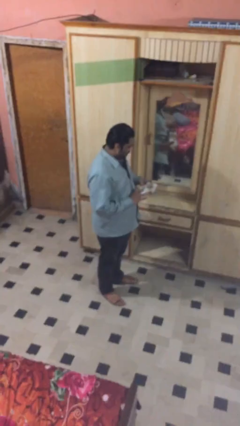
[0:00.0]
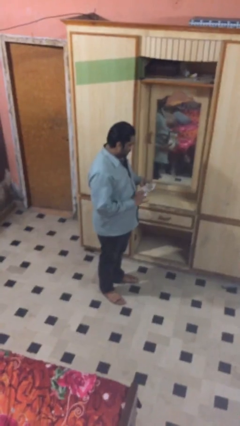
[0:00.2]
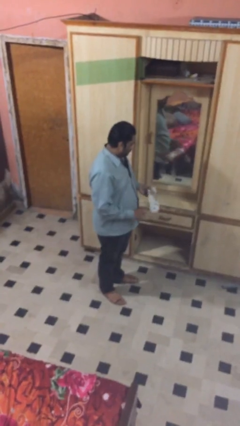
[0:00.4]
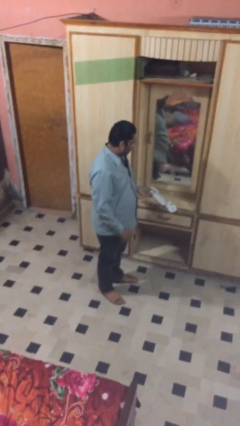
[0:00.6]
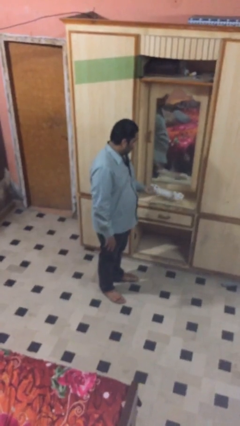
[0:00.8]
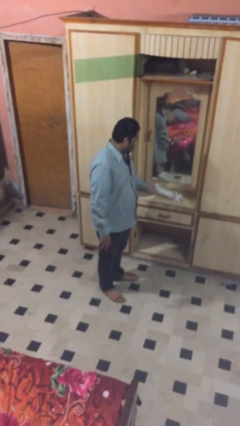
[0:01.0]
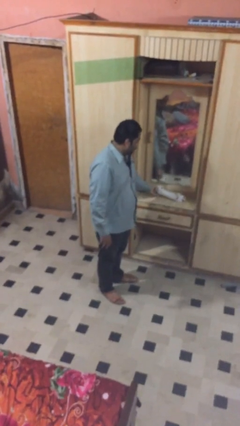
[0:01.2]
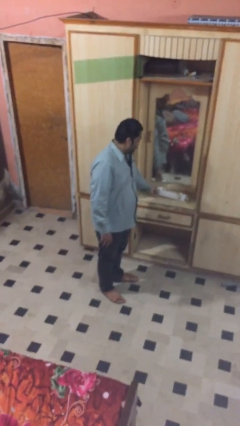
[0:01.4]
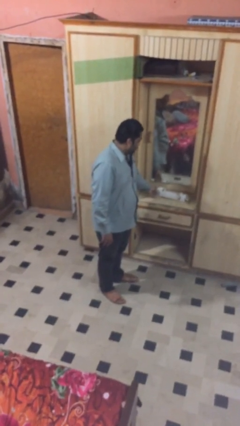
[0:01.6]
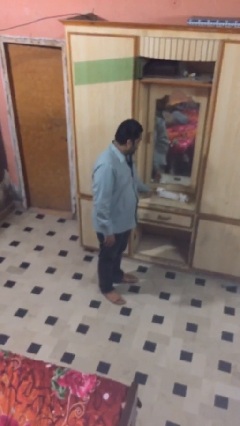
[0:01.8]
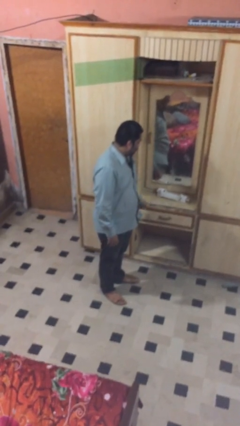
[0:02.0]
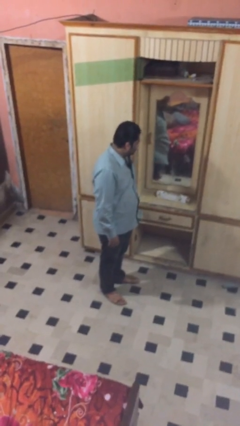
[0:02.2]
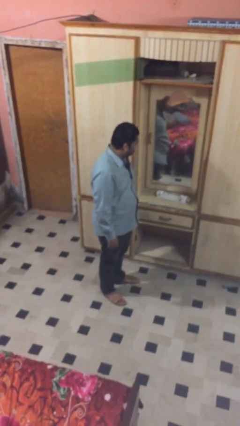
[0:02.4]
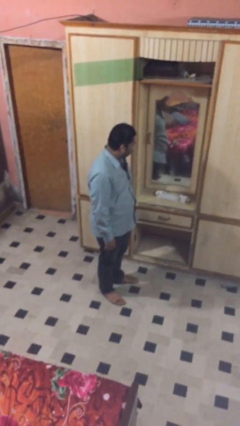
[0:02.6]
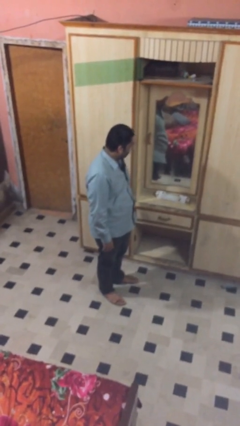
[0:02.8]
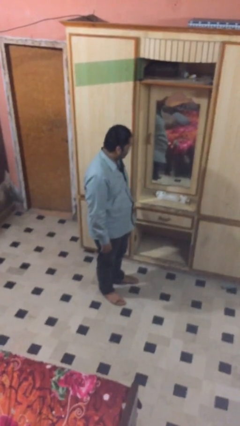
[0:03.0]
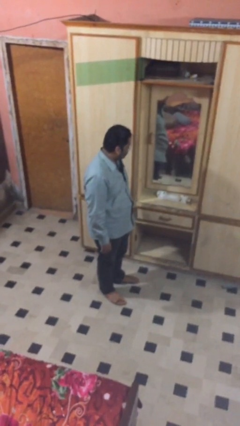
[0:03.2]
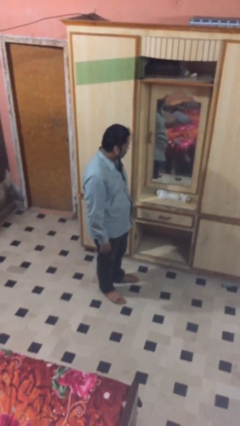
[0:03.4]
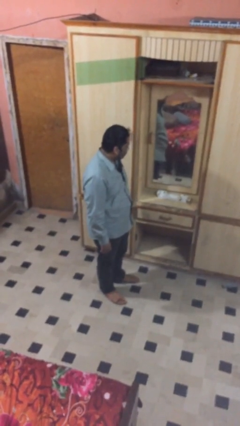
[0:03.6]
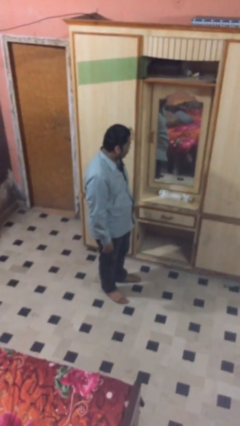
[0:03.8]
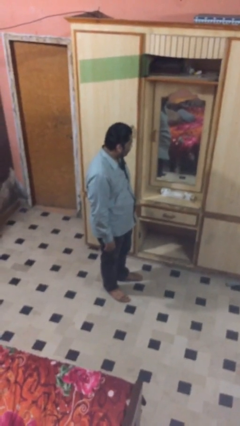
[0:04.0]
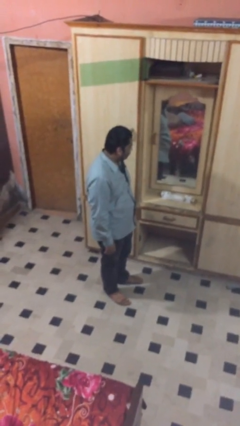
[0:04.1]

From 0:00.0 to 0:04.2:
person puts down object on table

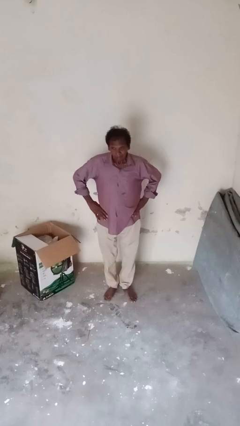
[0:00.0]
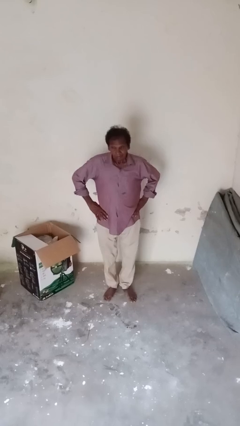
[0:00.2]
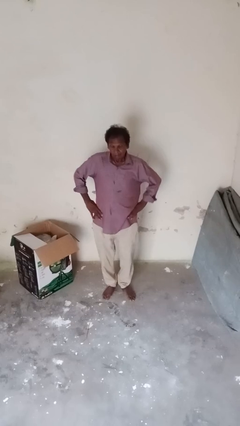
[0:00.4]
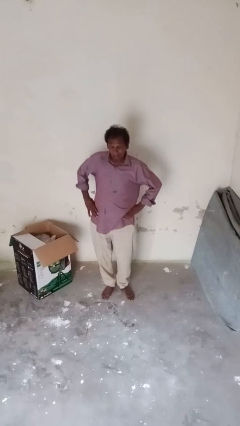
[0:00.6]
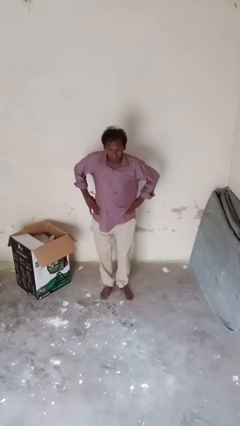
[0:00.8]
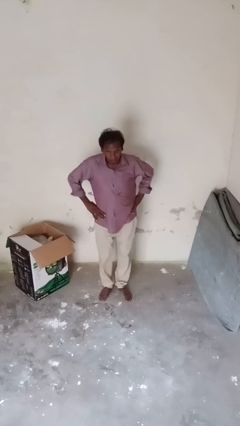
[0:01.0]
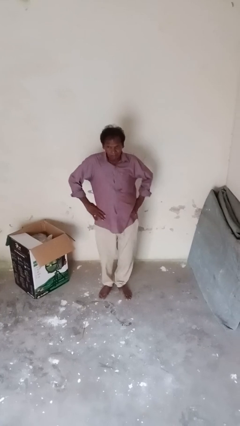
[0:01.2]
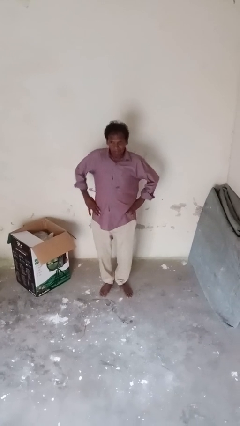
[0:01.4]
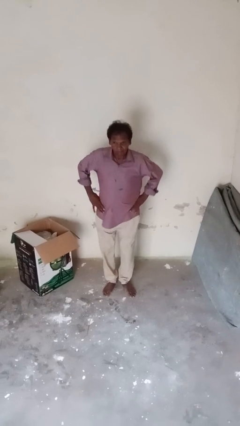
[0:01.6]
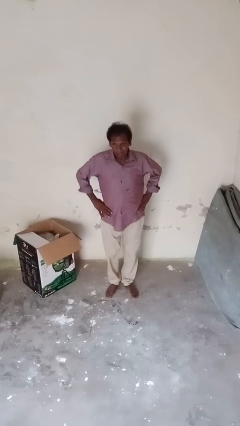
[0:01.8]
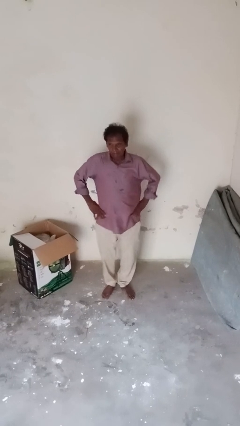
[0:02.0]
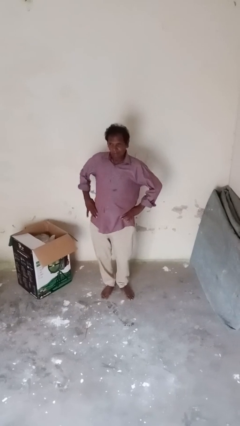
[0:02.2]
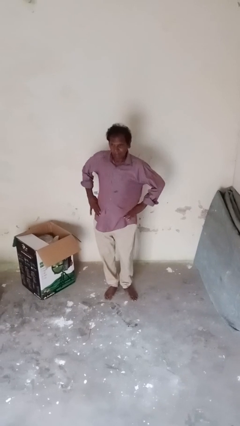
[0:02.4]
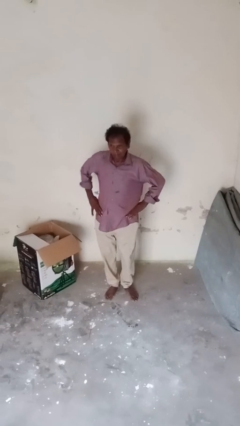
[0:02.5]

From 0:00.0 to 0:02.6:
person wiggles hips

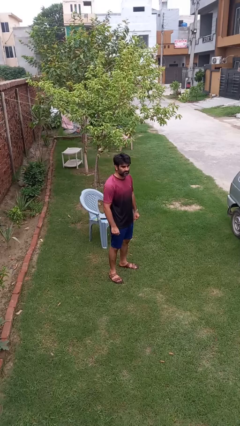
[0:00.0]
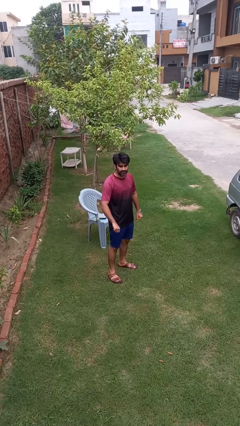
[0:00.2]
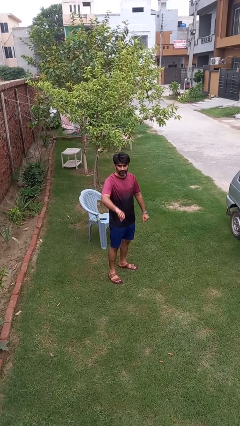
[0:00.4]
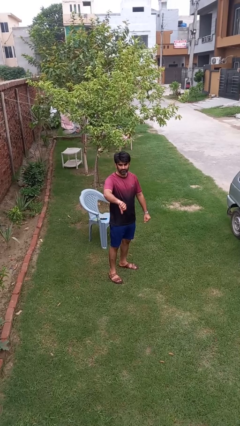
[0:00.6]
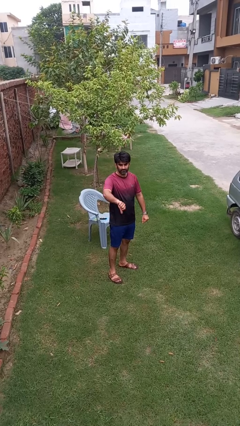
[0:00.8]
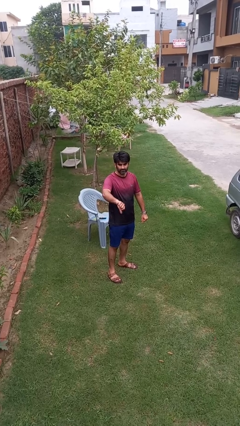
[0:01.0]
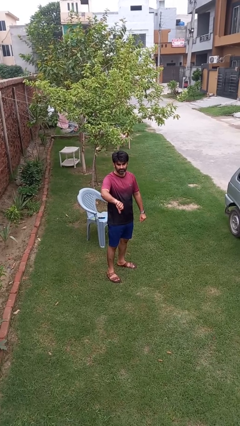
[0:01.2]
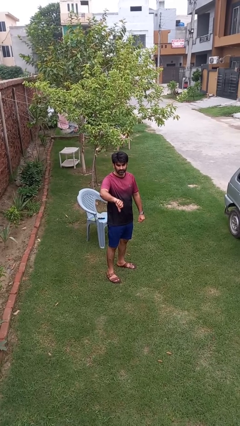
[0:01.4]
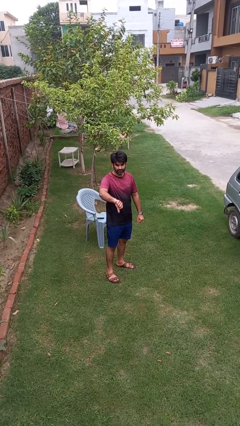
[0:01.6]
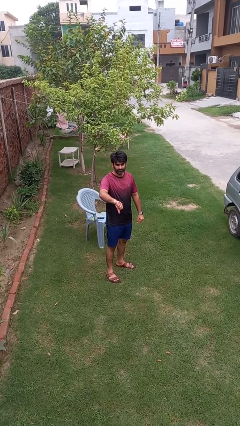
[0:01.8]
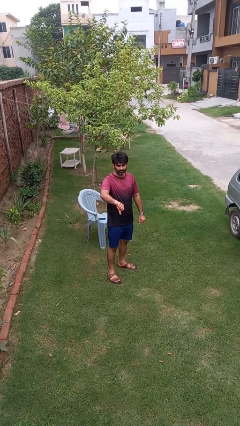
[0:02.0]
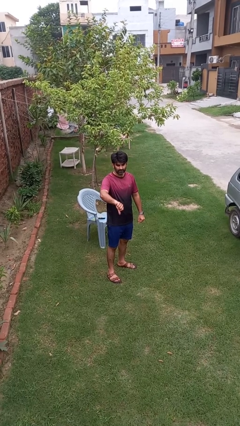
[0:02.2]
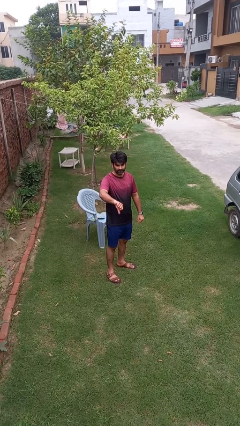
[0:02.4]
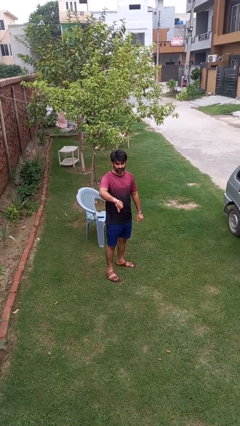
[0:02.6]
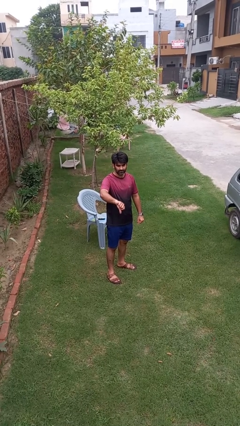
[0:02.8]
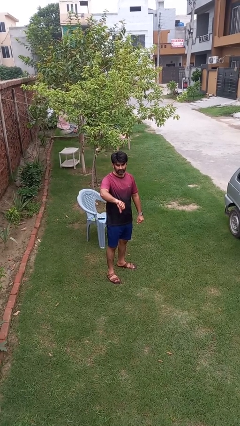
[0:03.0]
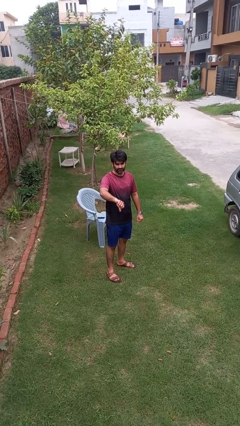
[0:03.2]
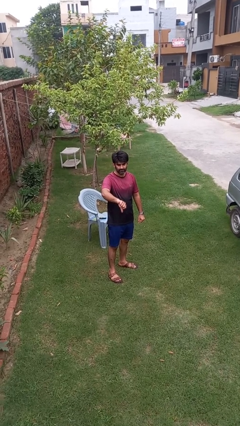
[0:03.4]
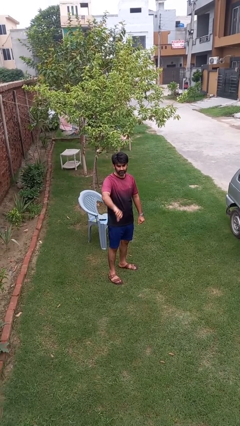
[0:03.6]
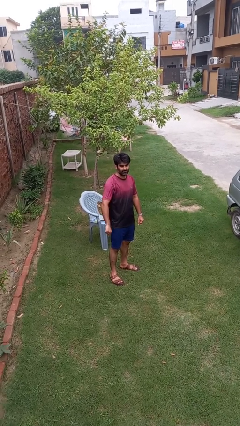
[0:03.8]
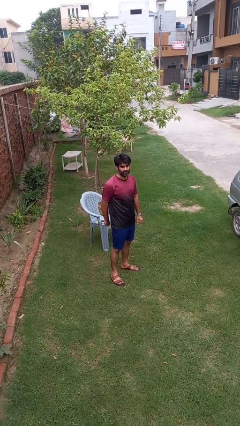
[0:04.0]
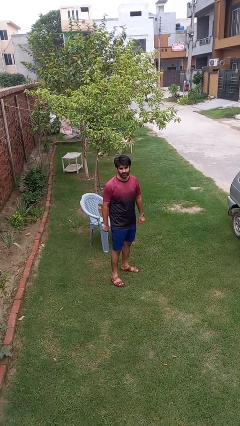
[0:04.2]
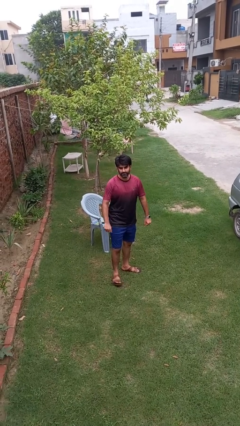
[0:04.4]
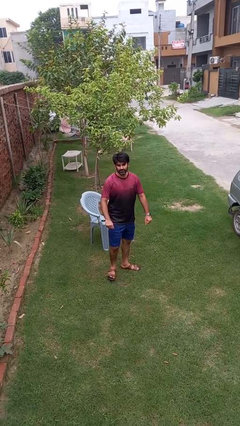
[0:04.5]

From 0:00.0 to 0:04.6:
person gestures thumbs down

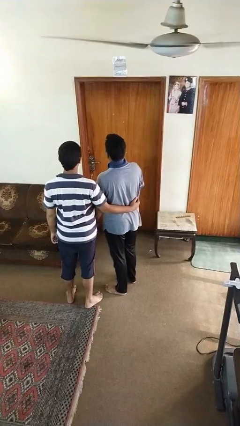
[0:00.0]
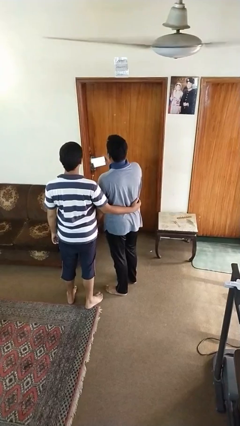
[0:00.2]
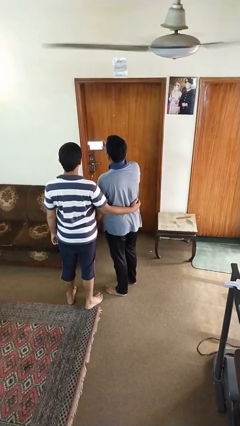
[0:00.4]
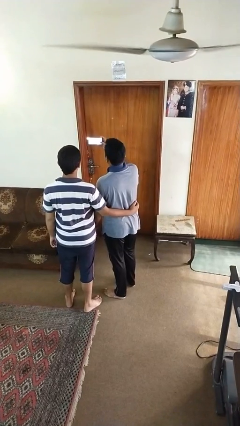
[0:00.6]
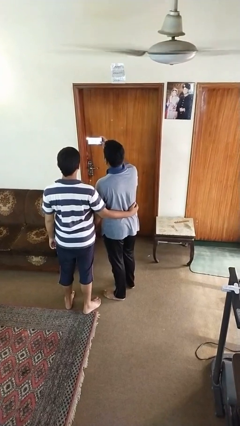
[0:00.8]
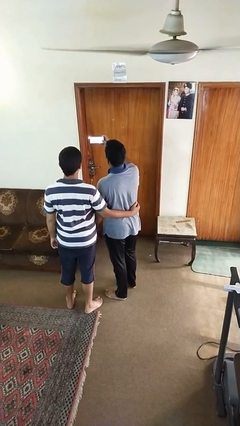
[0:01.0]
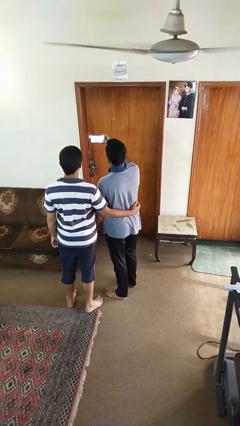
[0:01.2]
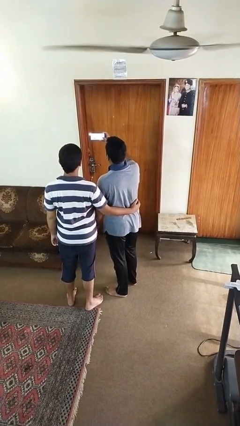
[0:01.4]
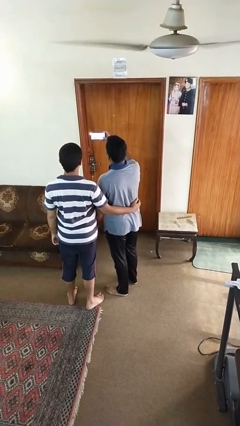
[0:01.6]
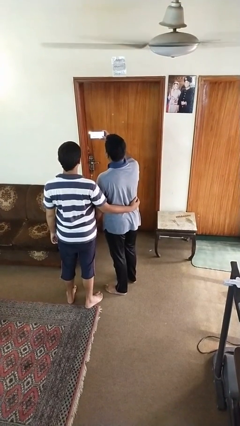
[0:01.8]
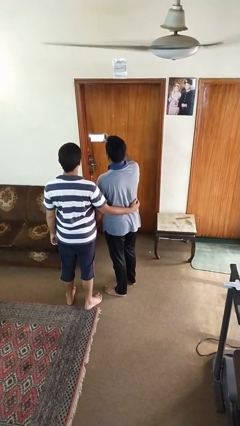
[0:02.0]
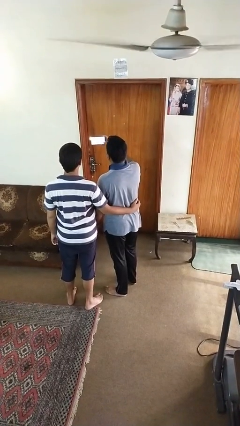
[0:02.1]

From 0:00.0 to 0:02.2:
person takes selfie with person

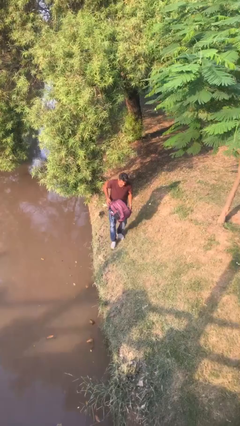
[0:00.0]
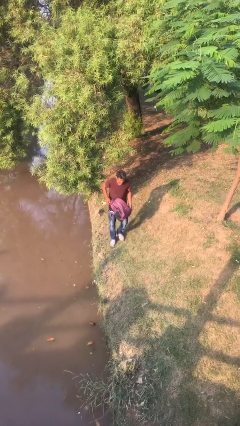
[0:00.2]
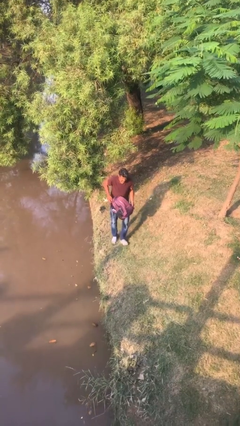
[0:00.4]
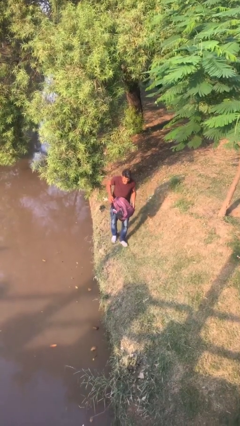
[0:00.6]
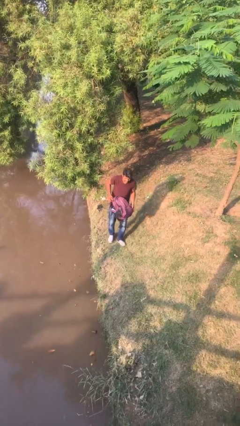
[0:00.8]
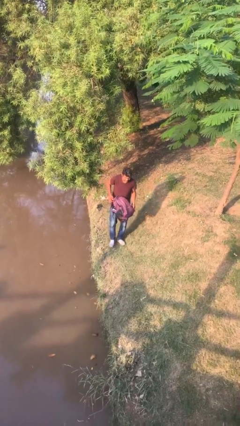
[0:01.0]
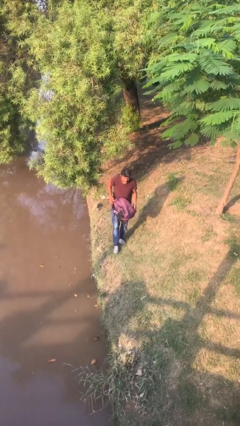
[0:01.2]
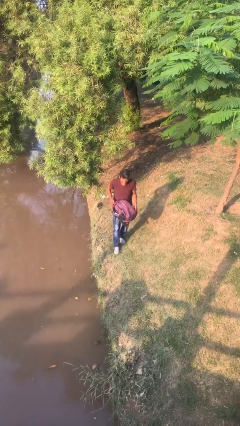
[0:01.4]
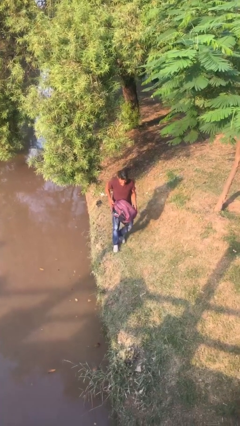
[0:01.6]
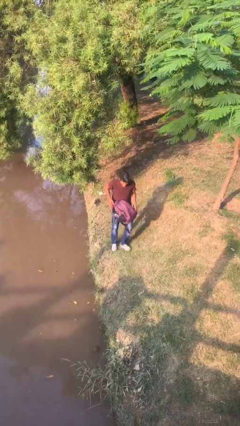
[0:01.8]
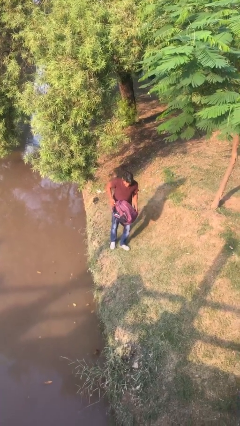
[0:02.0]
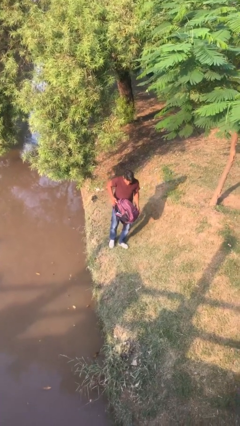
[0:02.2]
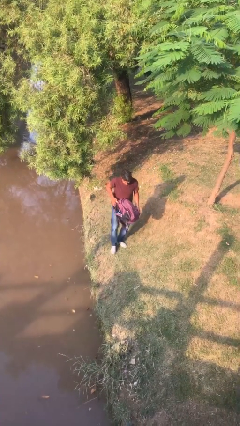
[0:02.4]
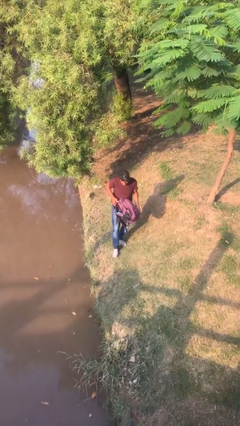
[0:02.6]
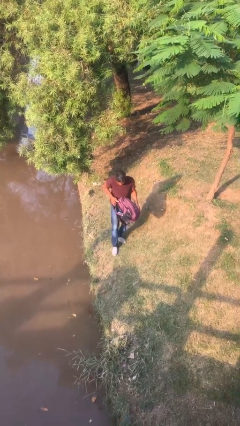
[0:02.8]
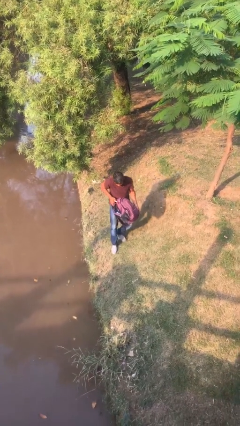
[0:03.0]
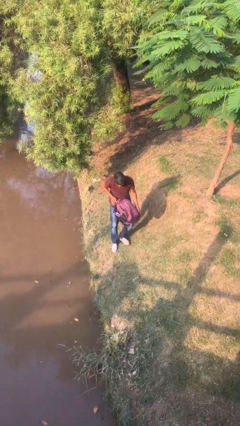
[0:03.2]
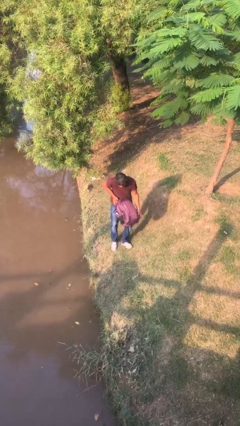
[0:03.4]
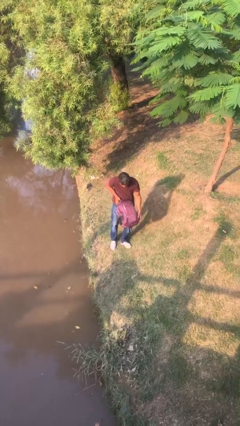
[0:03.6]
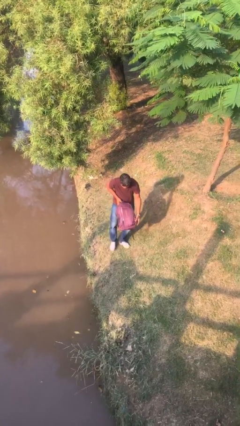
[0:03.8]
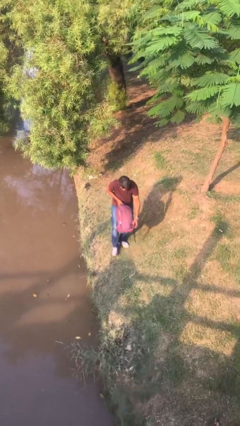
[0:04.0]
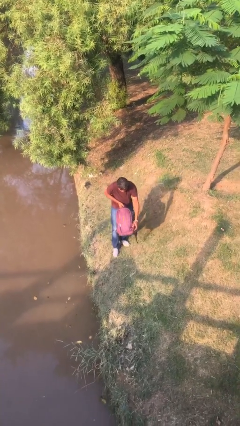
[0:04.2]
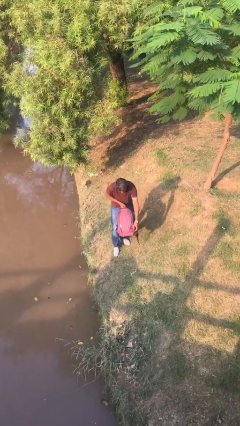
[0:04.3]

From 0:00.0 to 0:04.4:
person carries heavy object
